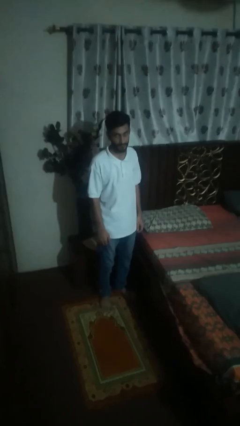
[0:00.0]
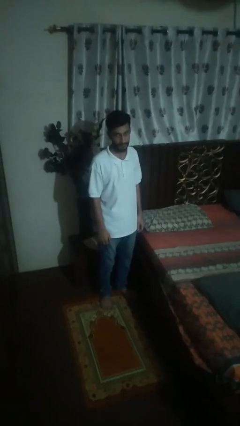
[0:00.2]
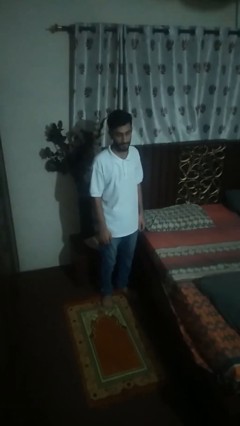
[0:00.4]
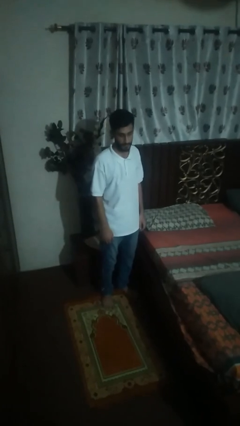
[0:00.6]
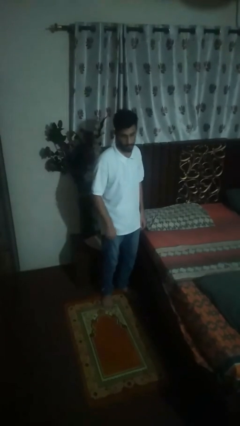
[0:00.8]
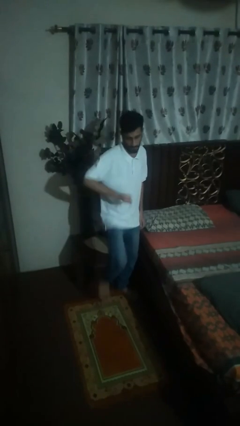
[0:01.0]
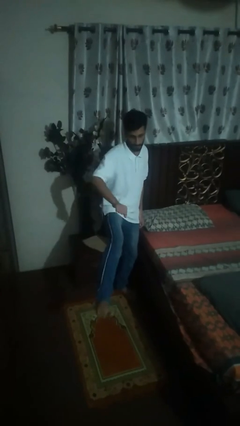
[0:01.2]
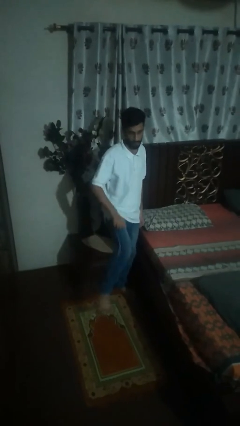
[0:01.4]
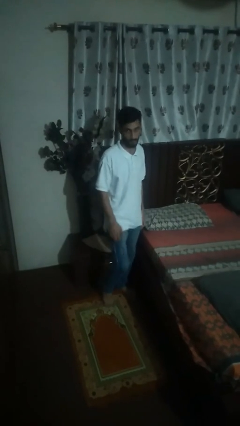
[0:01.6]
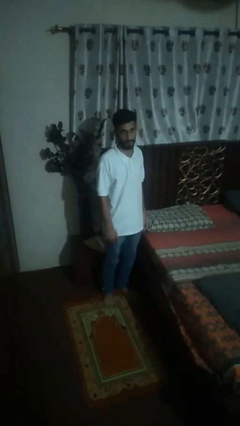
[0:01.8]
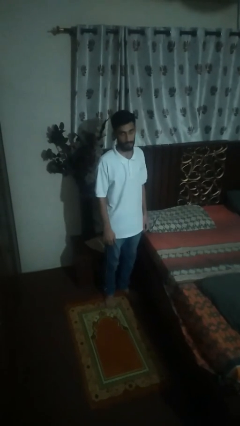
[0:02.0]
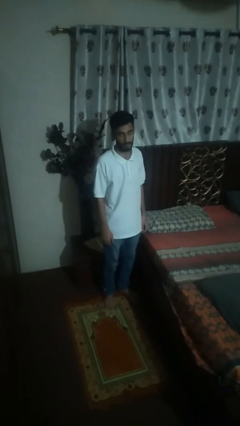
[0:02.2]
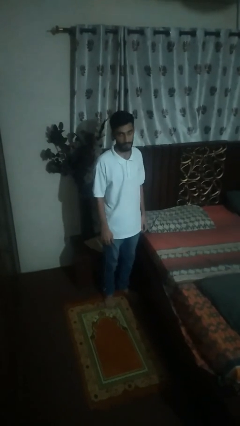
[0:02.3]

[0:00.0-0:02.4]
person karate kicks

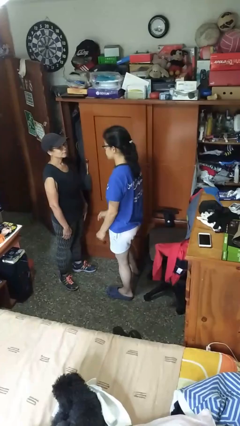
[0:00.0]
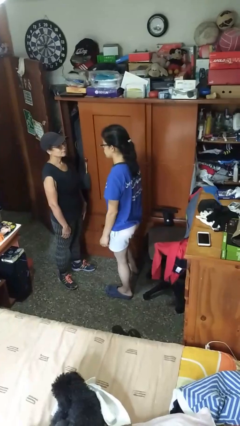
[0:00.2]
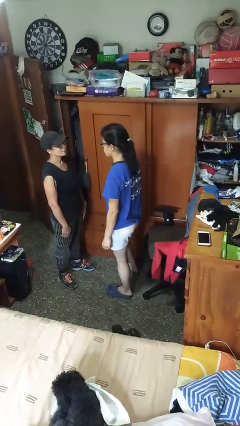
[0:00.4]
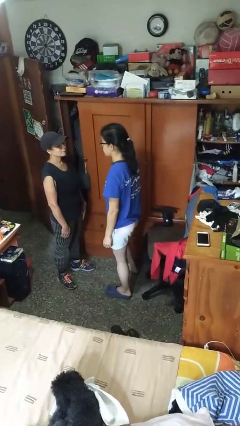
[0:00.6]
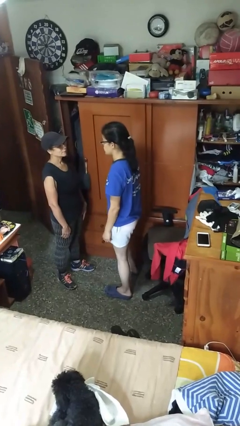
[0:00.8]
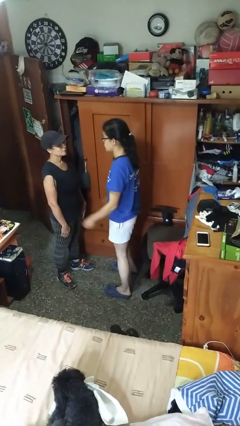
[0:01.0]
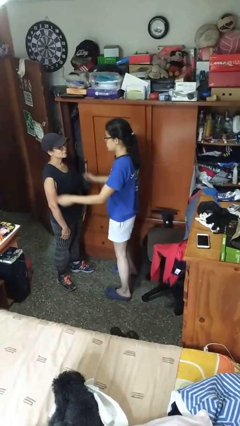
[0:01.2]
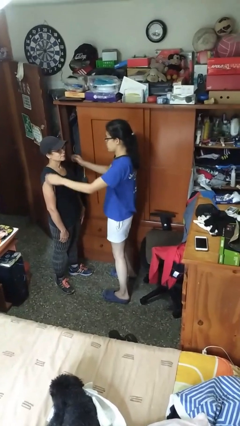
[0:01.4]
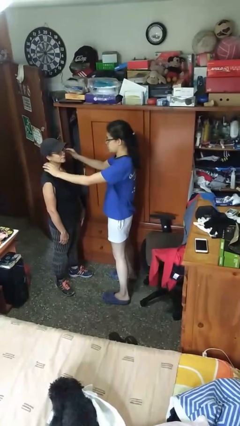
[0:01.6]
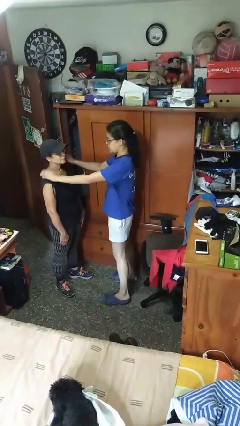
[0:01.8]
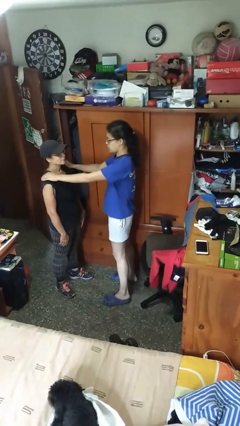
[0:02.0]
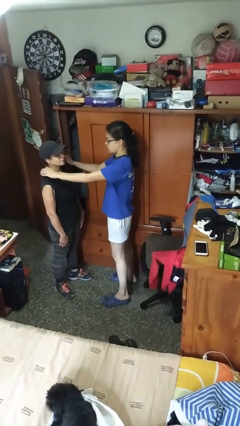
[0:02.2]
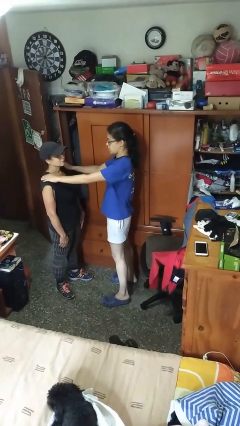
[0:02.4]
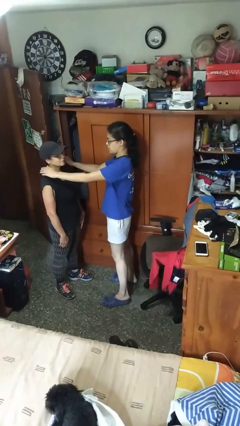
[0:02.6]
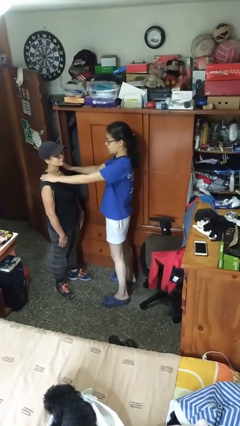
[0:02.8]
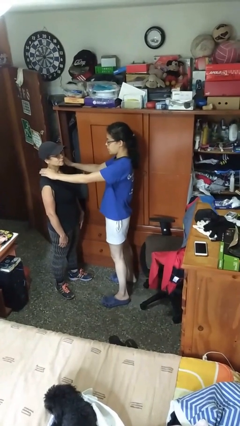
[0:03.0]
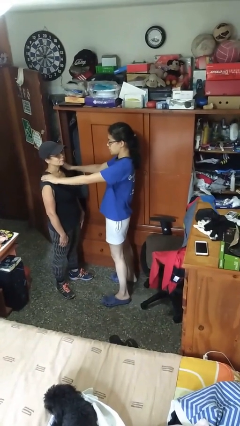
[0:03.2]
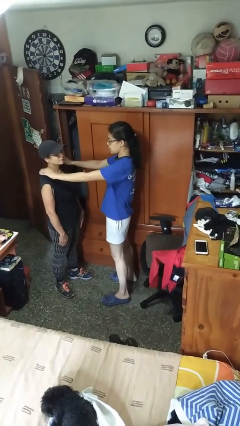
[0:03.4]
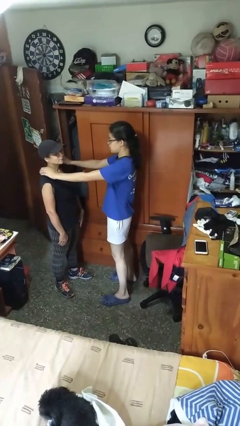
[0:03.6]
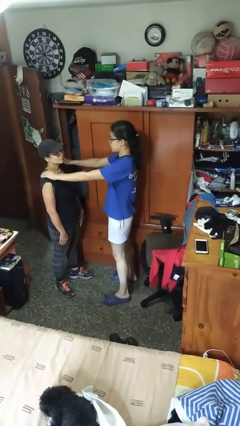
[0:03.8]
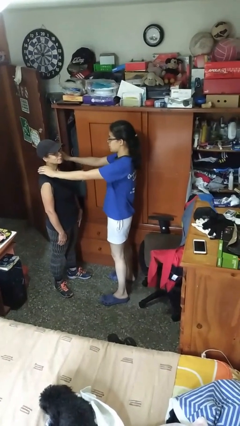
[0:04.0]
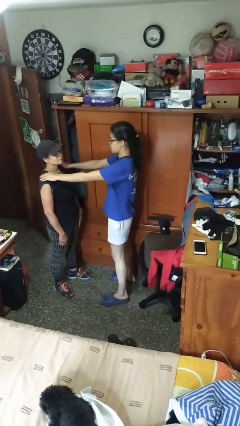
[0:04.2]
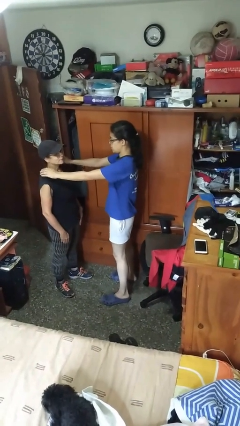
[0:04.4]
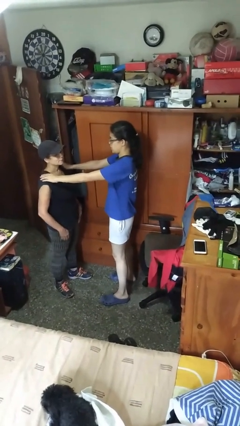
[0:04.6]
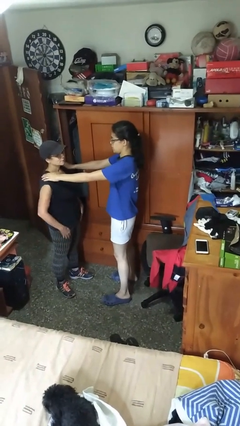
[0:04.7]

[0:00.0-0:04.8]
person pounds shoulders of person

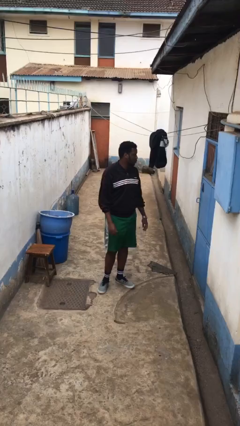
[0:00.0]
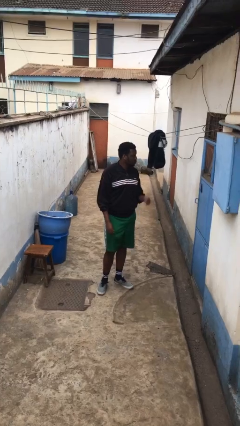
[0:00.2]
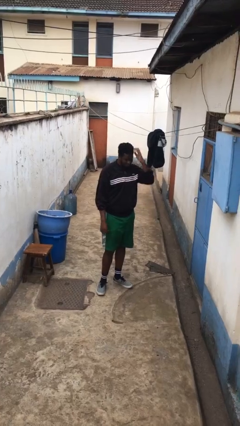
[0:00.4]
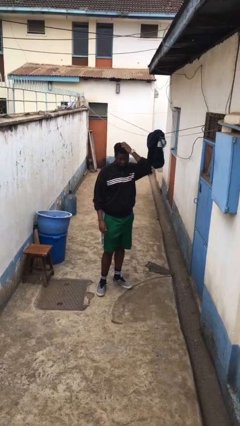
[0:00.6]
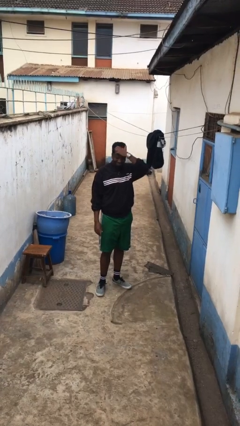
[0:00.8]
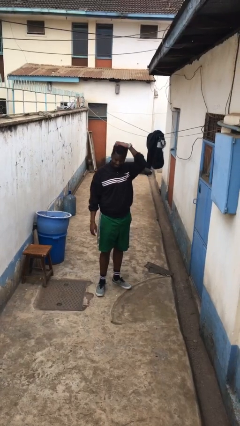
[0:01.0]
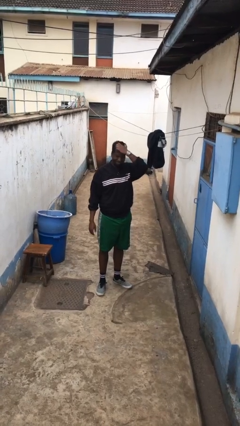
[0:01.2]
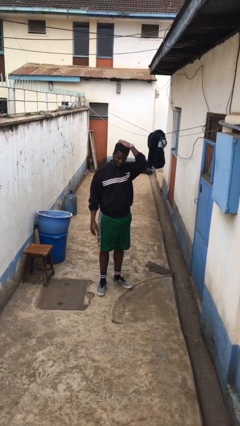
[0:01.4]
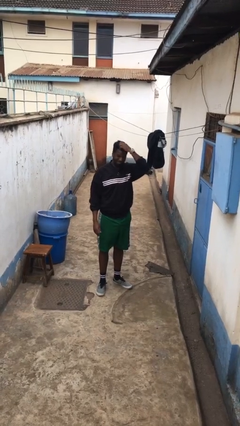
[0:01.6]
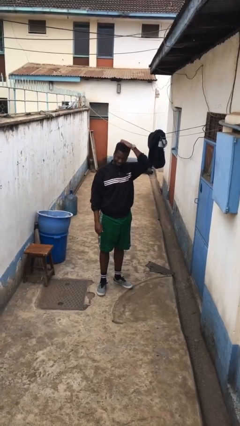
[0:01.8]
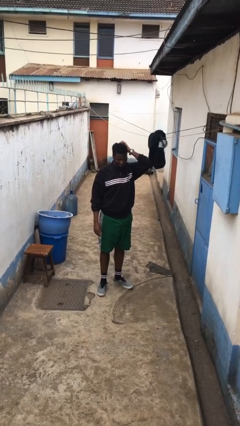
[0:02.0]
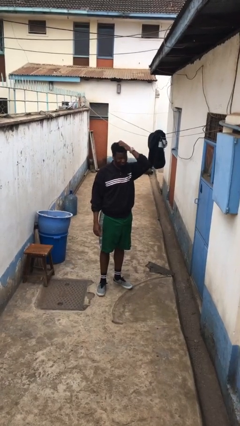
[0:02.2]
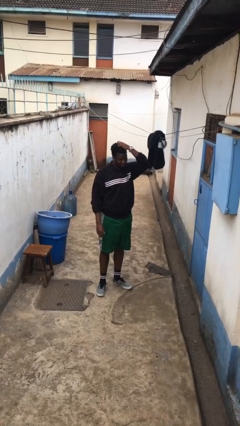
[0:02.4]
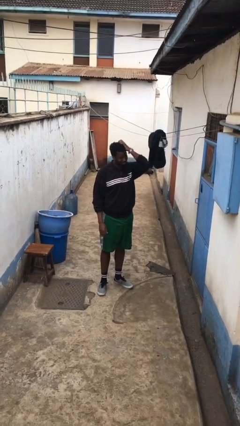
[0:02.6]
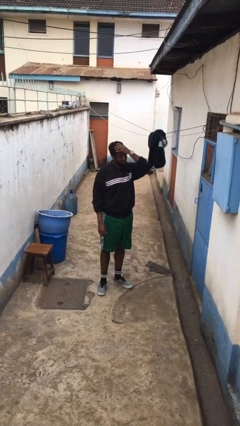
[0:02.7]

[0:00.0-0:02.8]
person scratches face

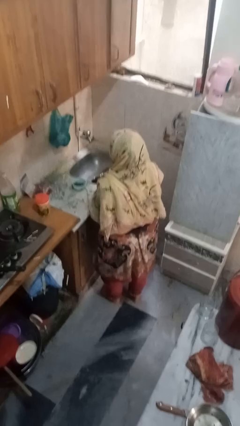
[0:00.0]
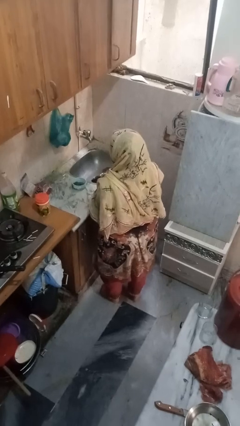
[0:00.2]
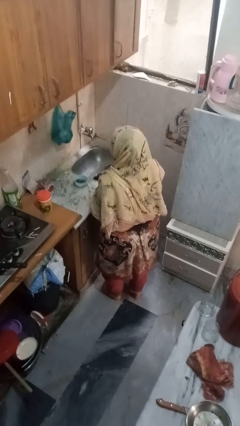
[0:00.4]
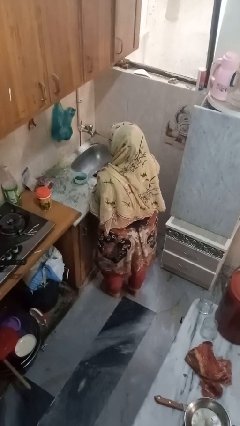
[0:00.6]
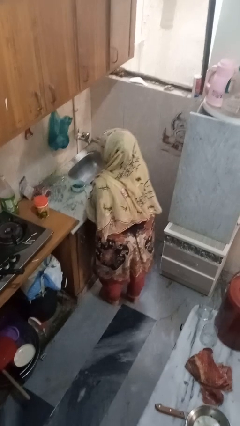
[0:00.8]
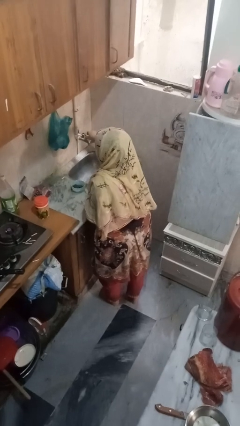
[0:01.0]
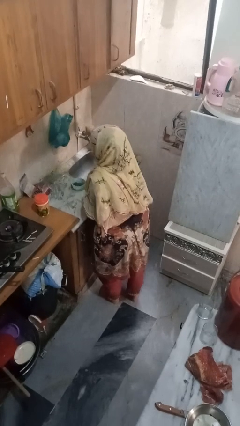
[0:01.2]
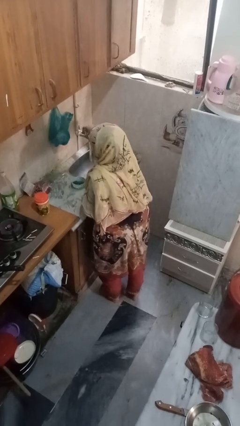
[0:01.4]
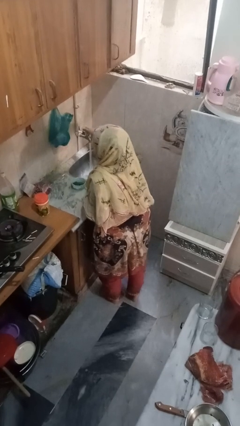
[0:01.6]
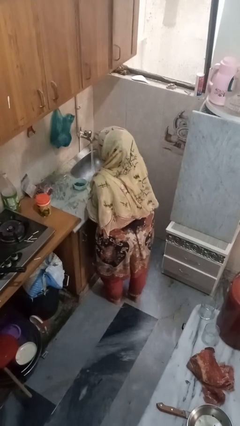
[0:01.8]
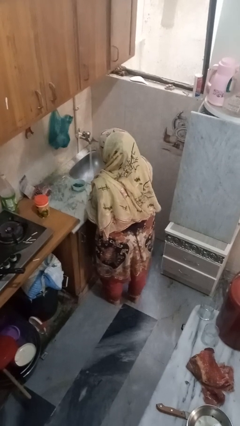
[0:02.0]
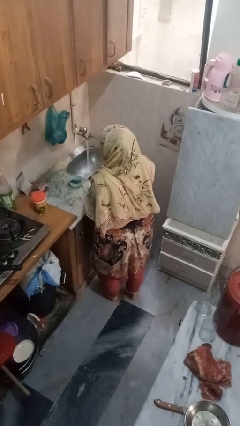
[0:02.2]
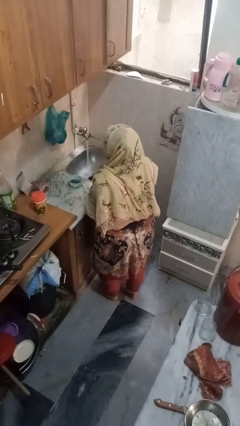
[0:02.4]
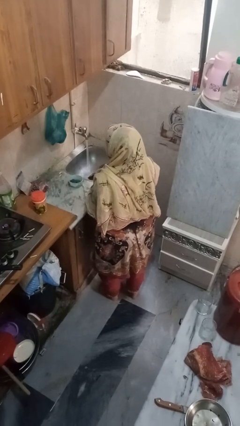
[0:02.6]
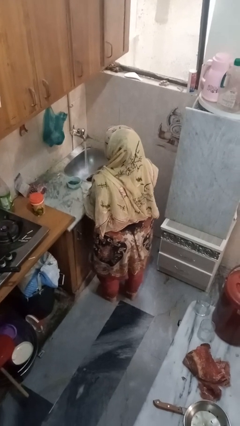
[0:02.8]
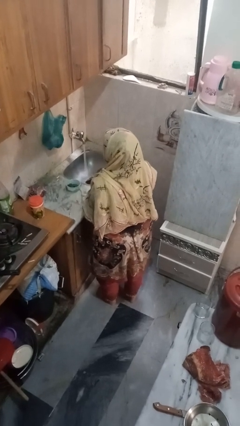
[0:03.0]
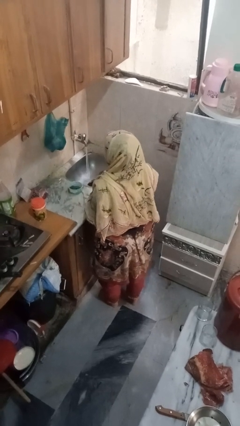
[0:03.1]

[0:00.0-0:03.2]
person turns on faucet

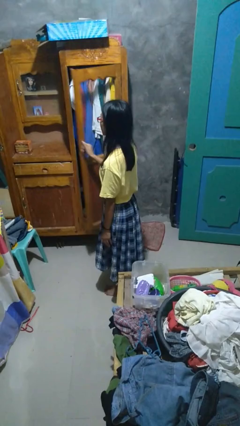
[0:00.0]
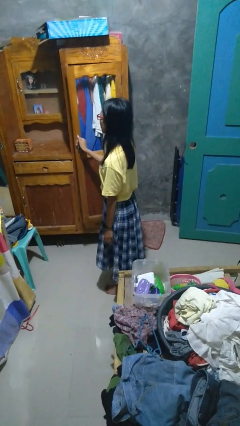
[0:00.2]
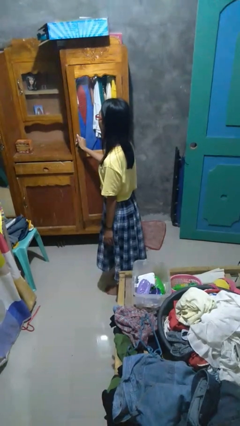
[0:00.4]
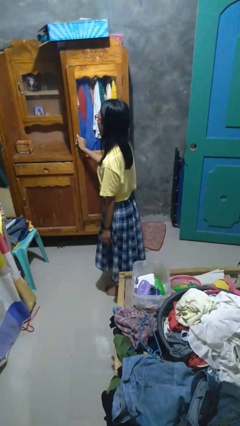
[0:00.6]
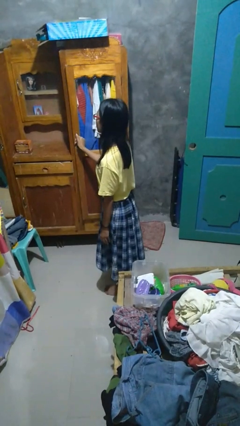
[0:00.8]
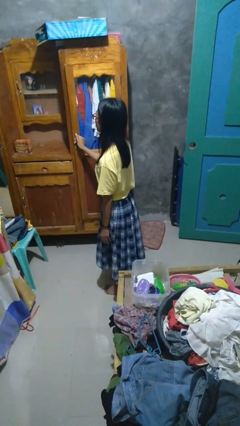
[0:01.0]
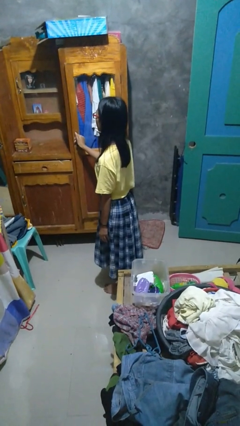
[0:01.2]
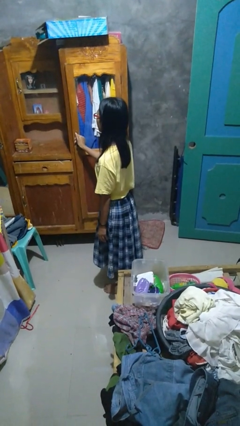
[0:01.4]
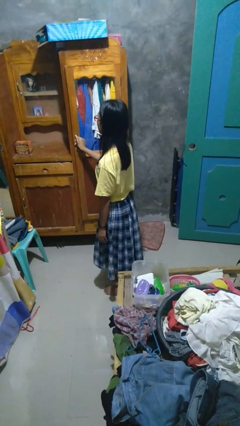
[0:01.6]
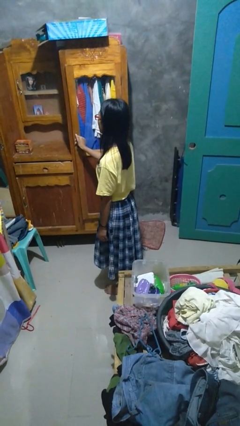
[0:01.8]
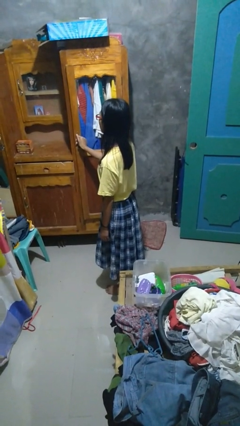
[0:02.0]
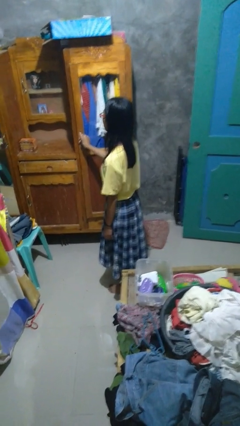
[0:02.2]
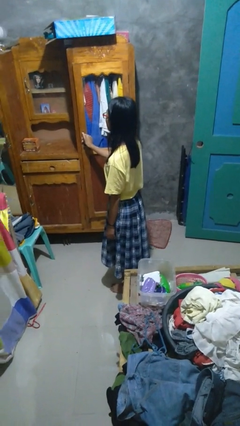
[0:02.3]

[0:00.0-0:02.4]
person closes closet door

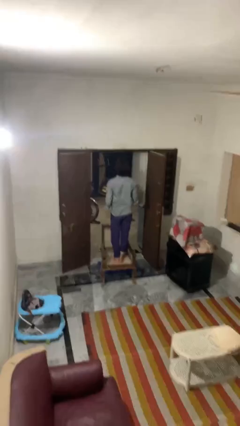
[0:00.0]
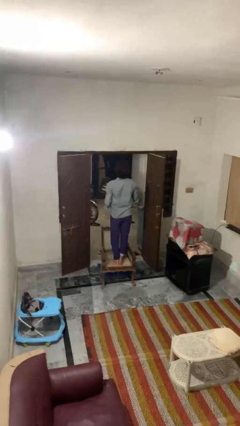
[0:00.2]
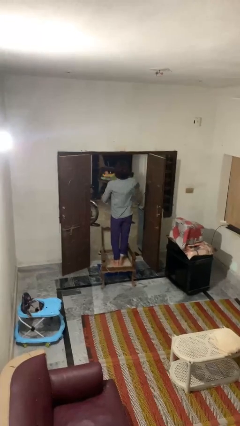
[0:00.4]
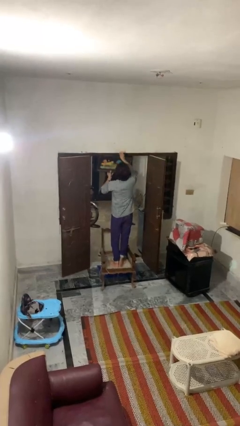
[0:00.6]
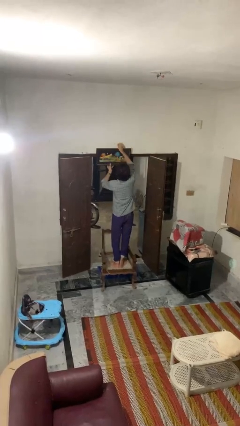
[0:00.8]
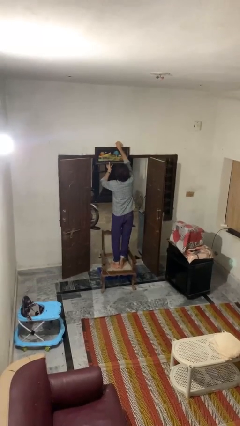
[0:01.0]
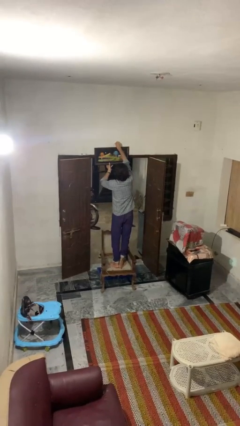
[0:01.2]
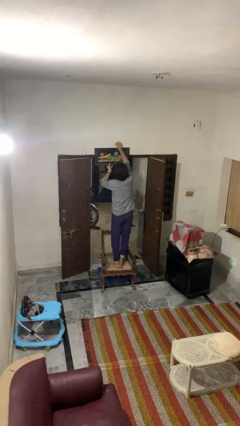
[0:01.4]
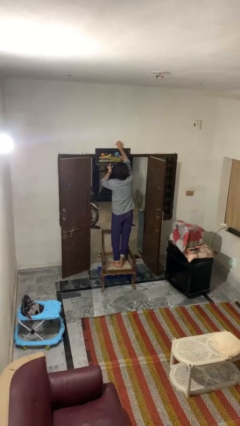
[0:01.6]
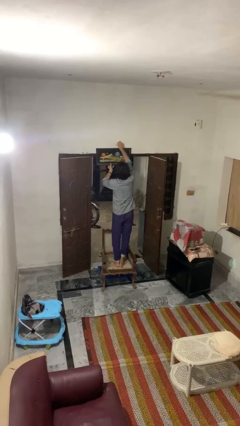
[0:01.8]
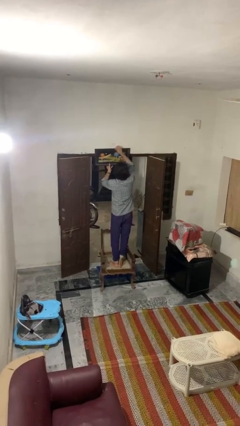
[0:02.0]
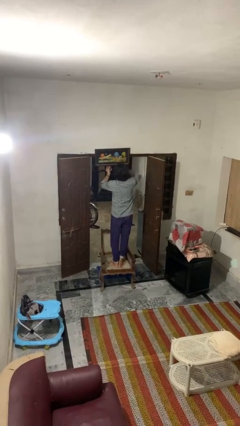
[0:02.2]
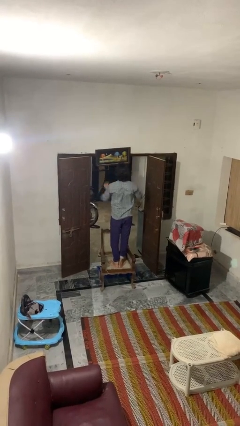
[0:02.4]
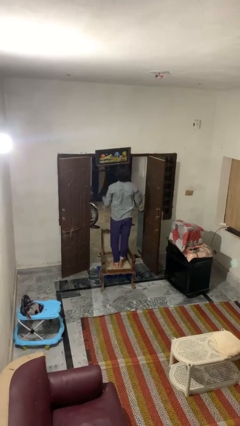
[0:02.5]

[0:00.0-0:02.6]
person puts up picture frame
